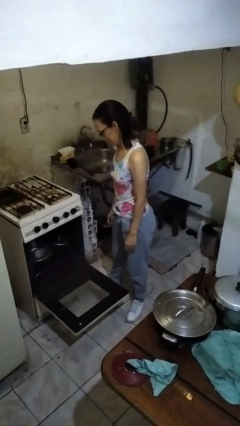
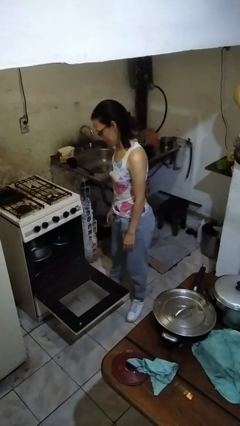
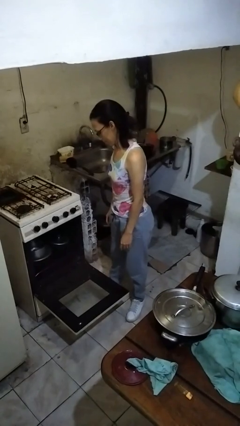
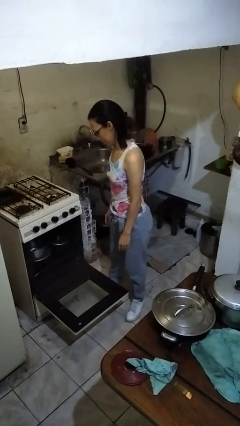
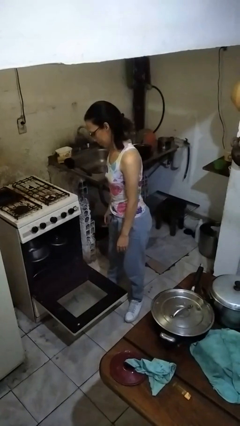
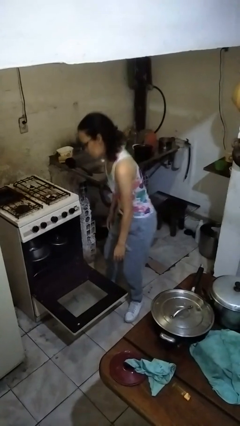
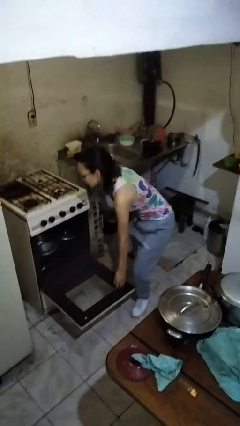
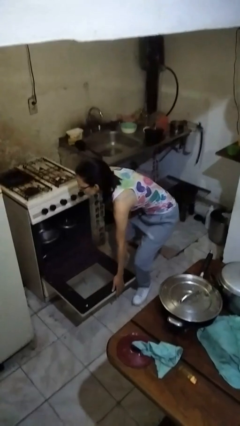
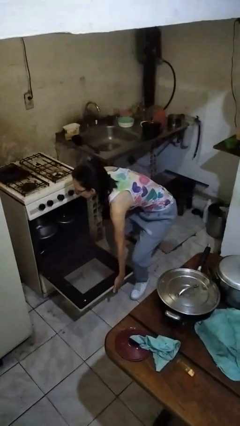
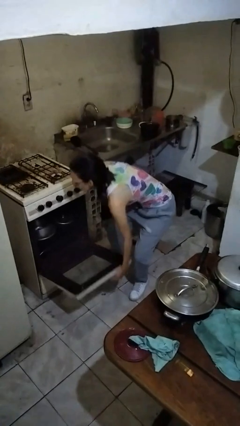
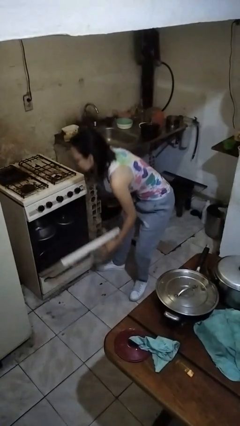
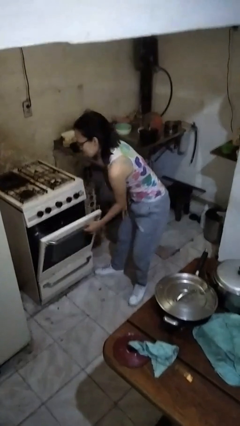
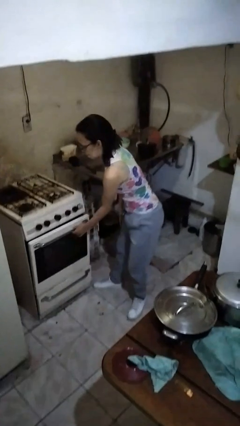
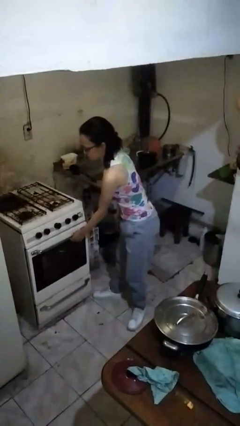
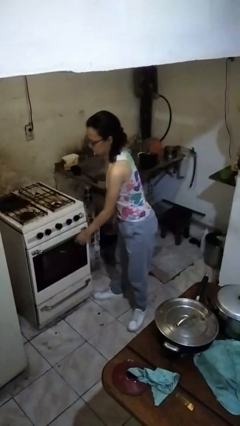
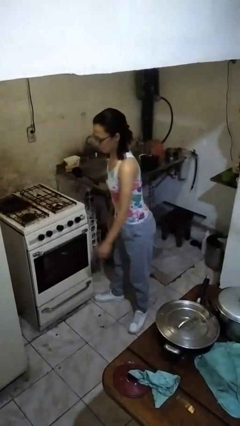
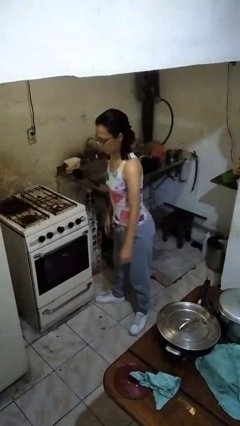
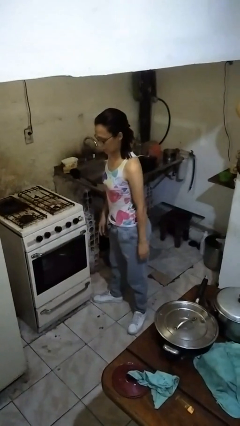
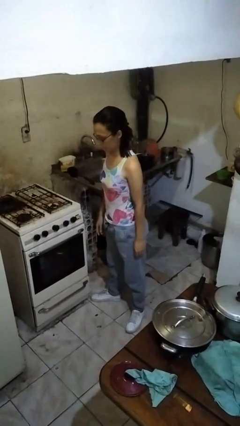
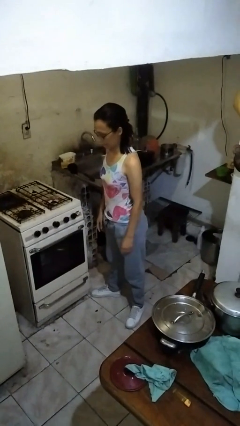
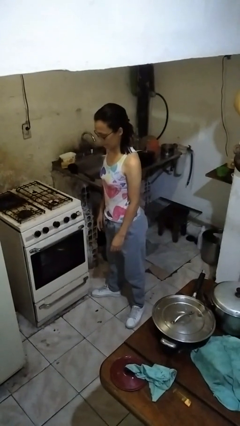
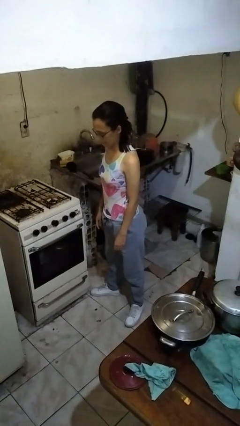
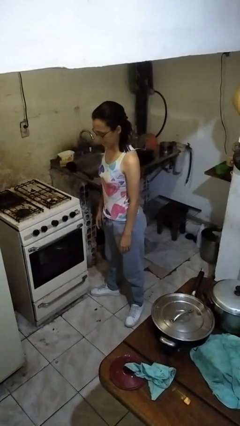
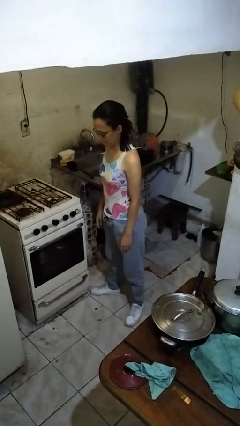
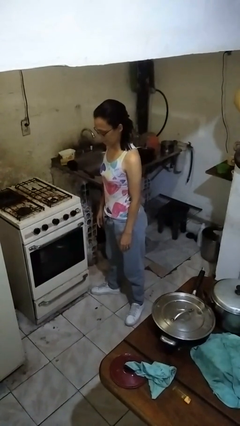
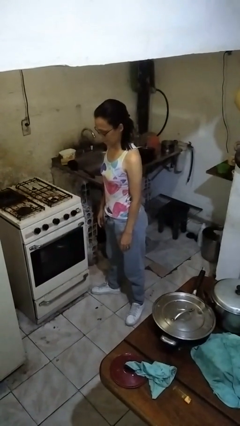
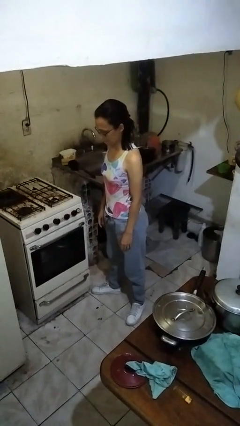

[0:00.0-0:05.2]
person closes oven door

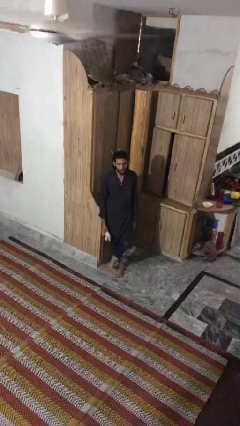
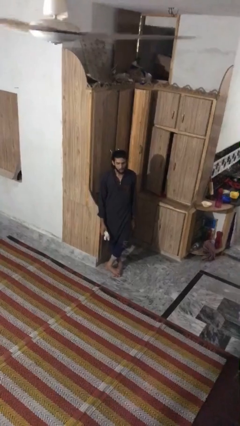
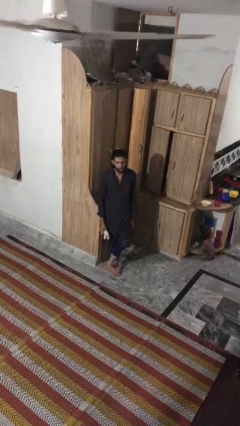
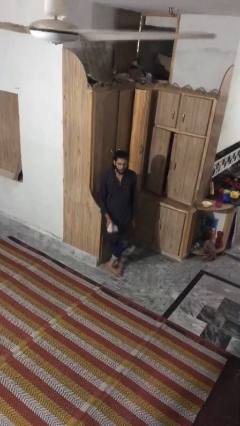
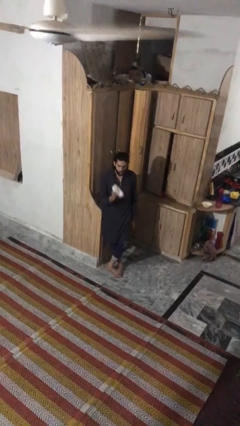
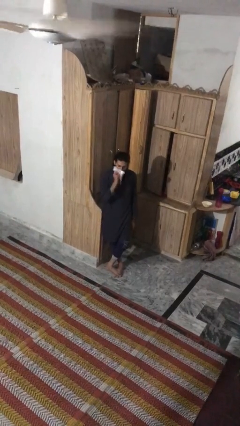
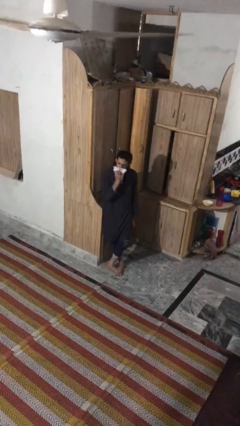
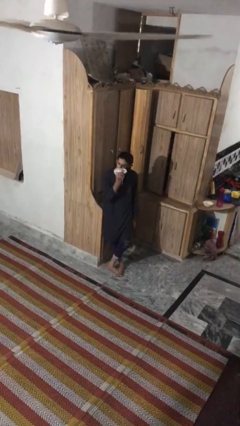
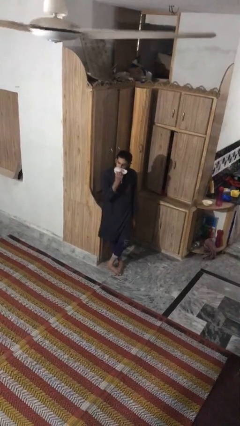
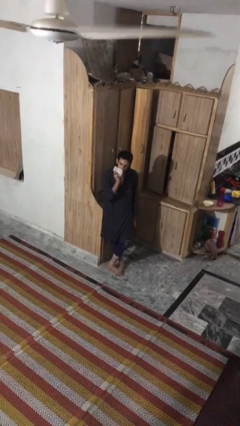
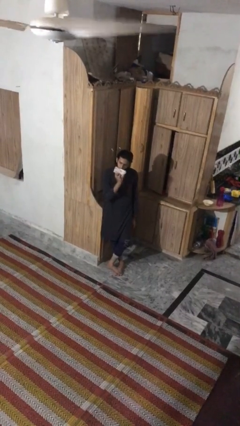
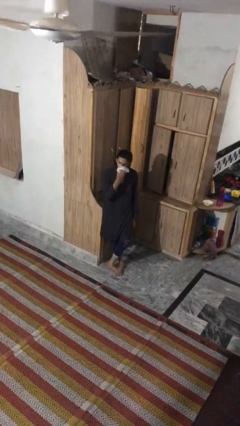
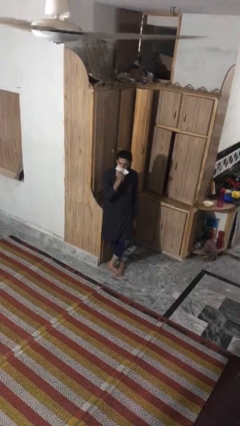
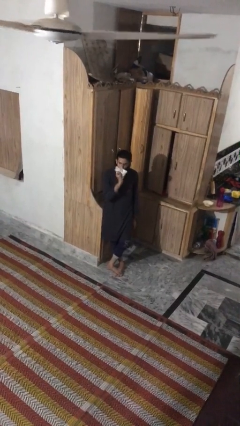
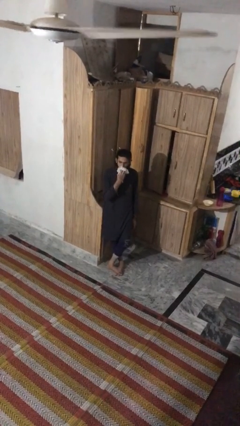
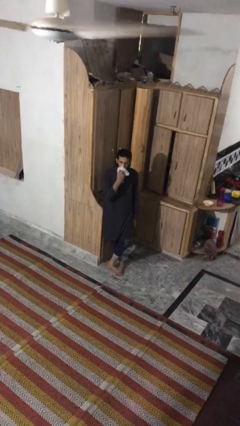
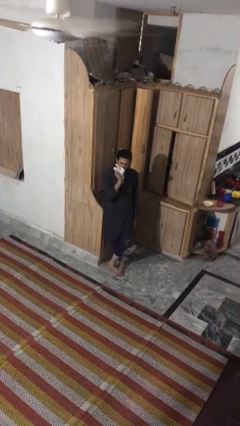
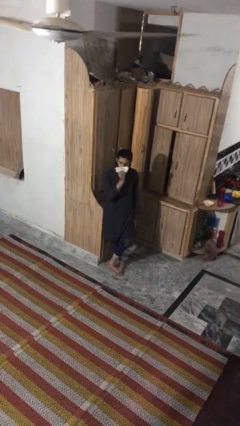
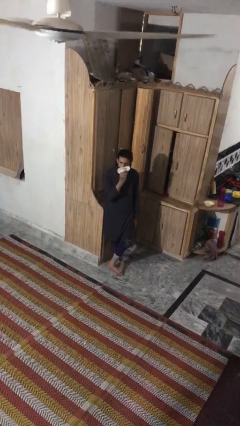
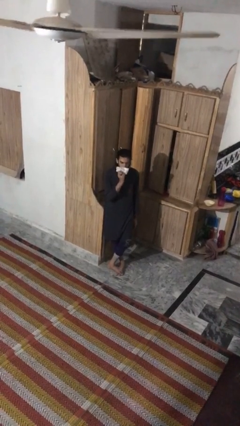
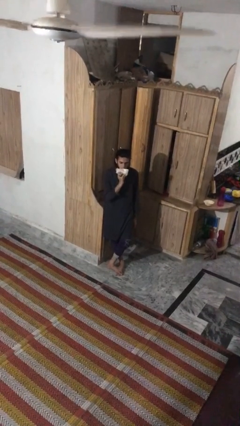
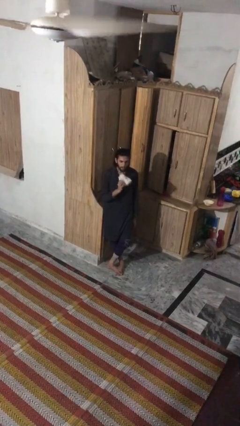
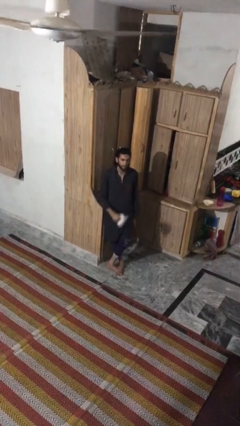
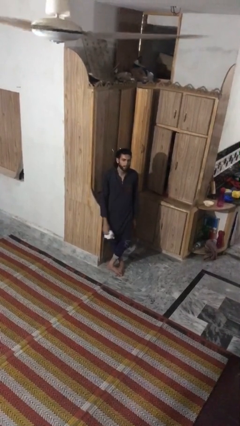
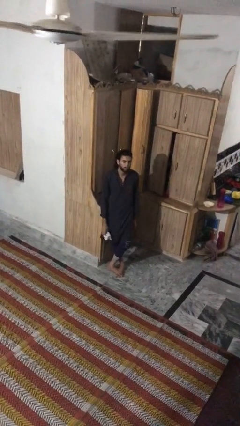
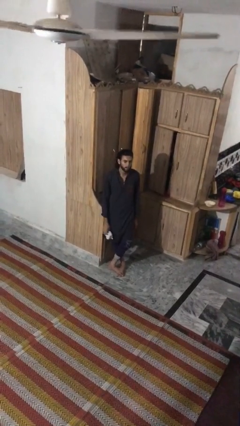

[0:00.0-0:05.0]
person wipes mouth with napkin

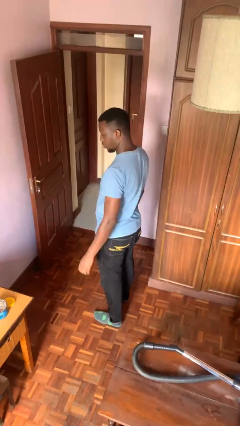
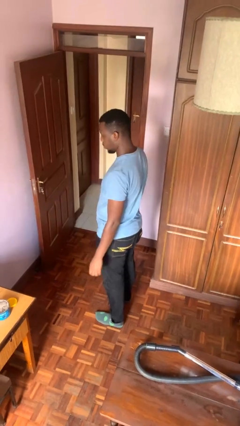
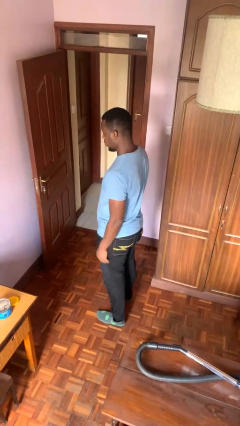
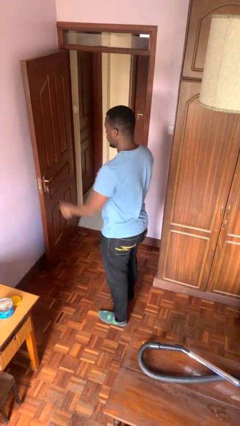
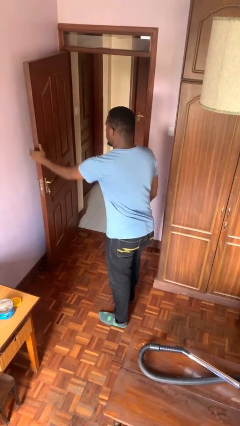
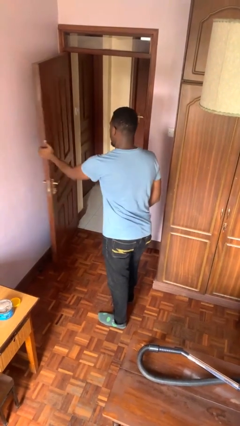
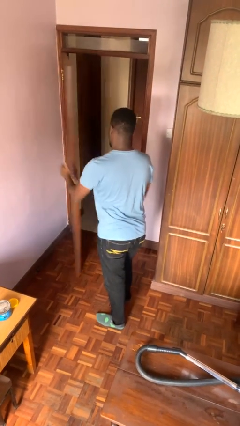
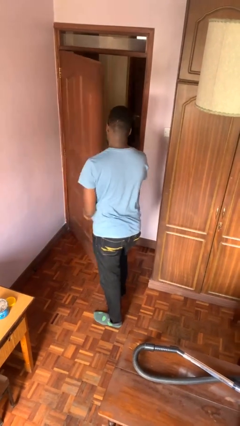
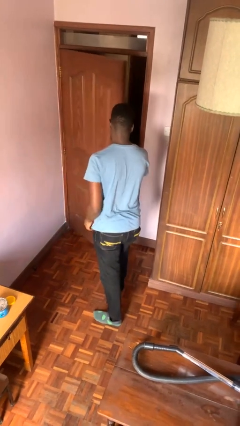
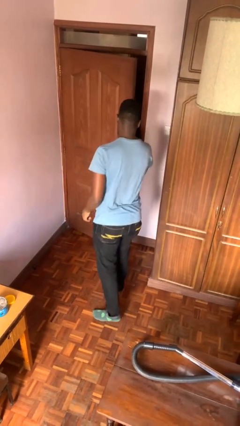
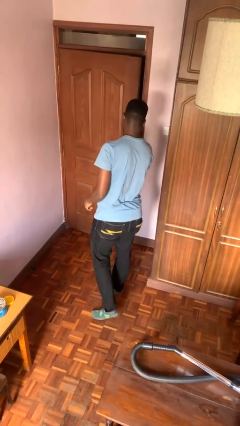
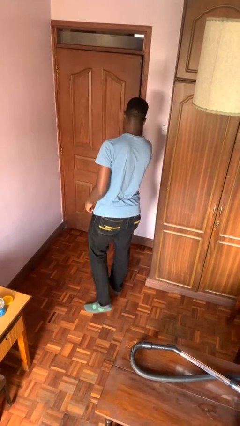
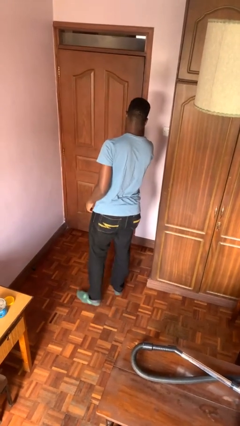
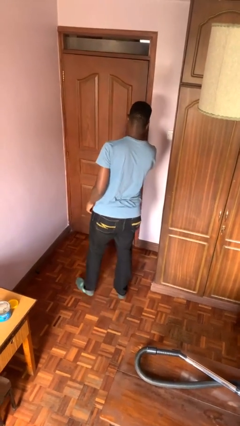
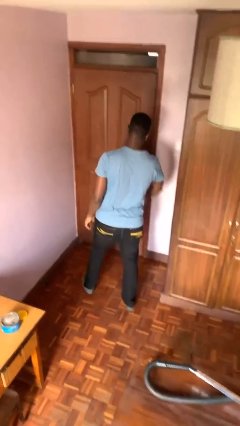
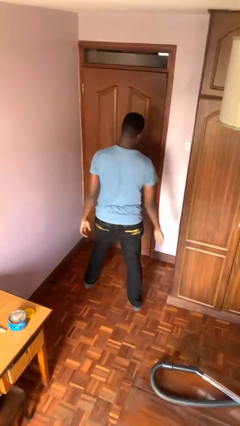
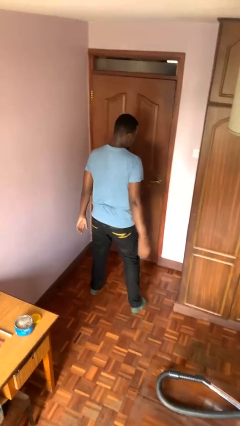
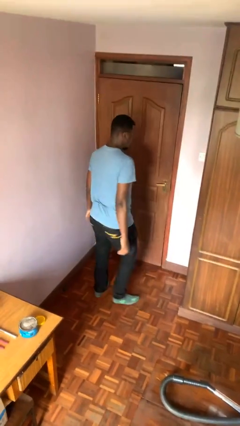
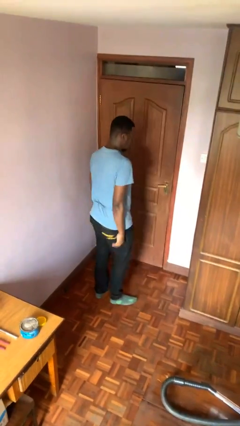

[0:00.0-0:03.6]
person closes facility door

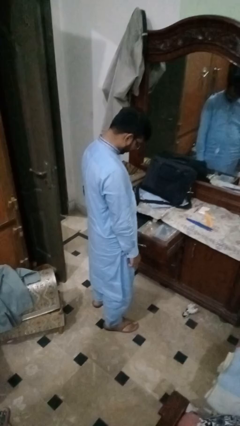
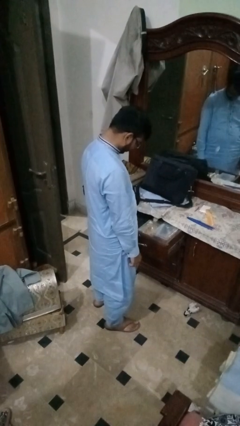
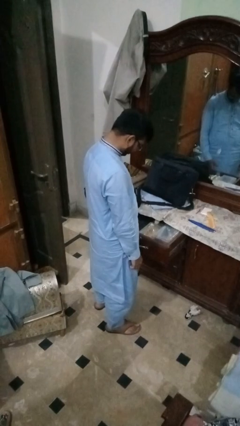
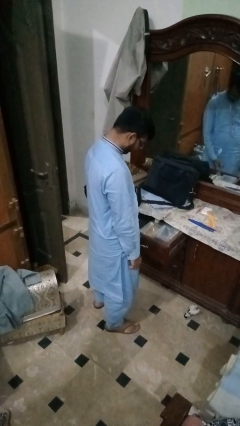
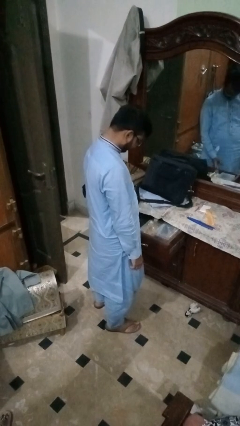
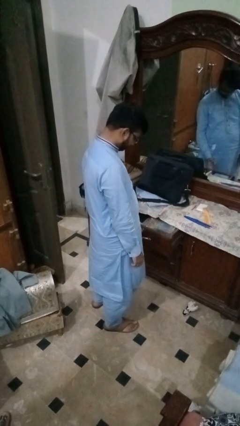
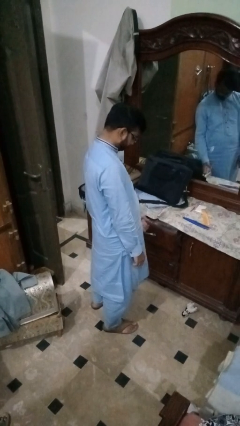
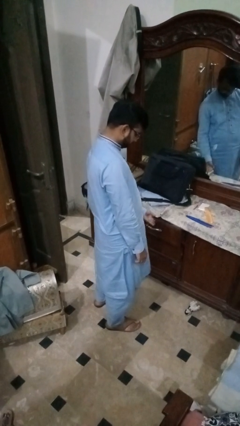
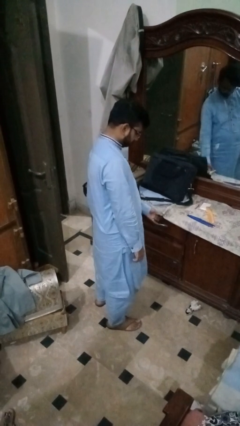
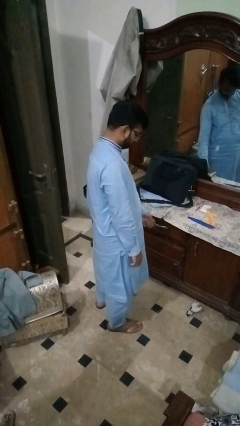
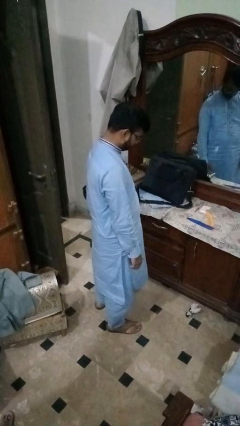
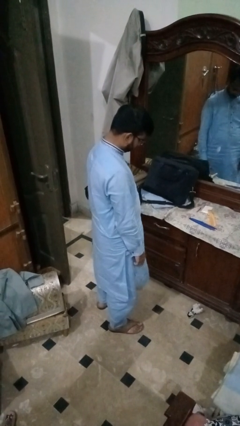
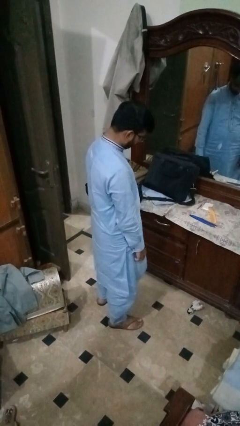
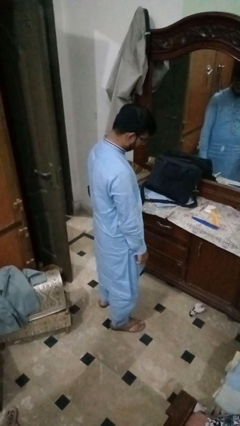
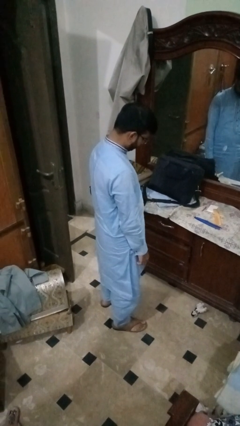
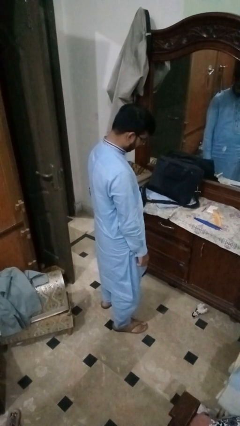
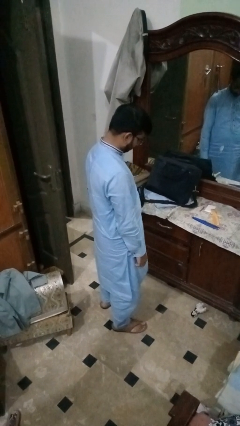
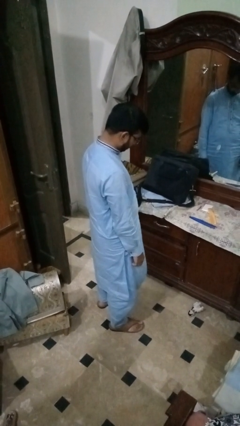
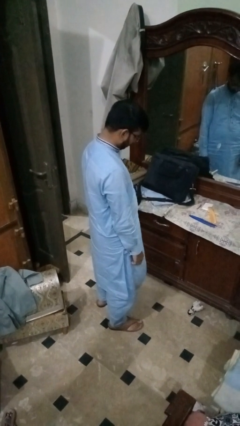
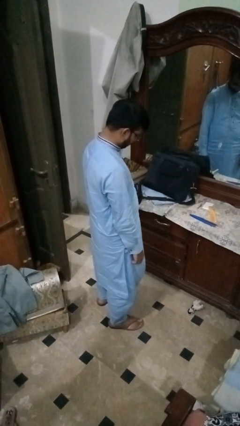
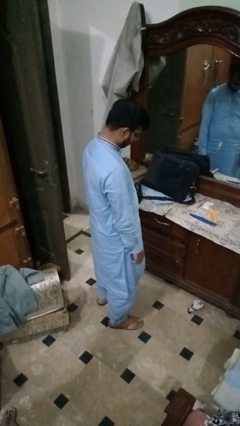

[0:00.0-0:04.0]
person closes dresser drawer

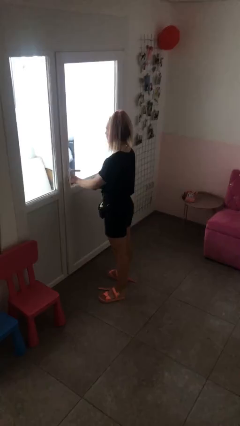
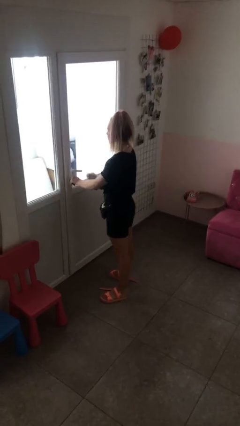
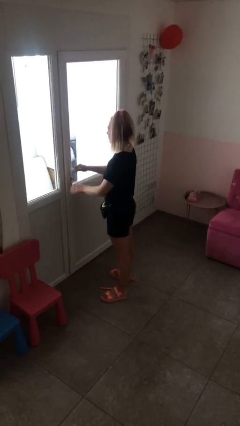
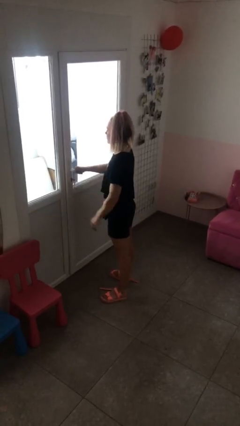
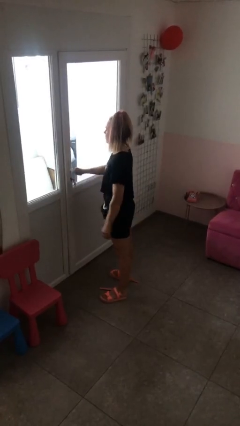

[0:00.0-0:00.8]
person unlocks door with keys
